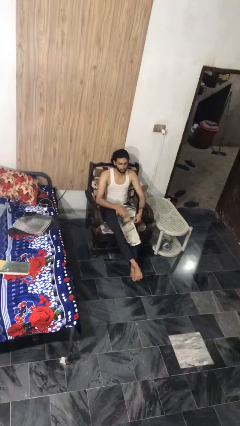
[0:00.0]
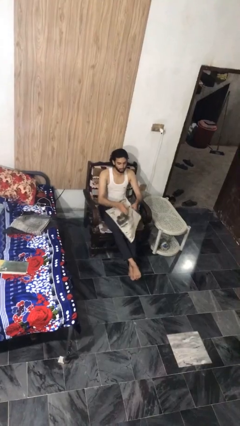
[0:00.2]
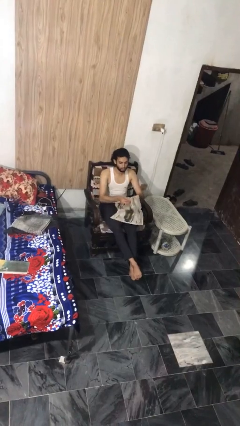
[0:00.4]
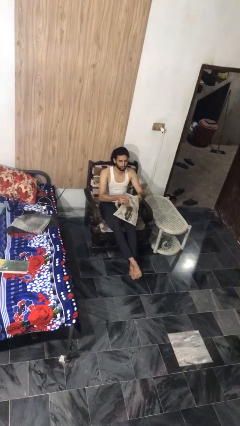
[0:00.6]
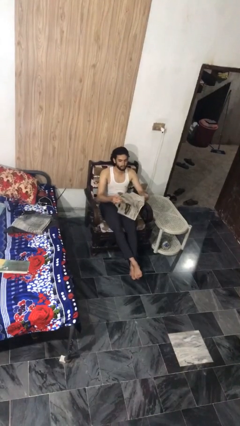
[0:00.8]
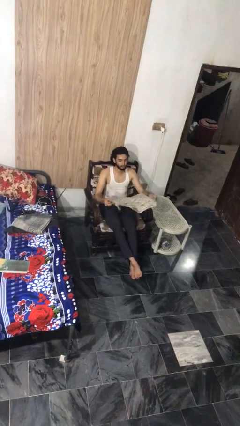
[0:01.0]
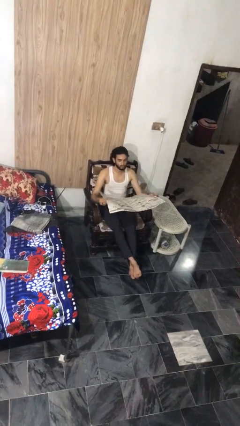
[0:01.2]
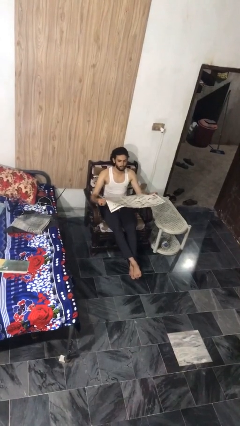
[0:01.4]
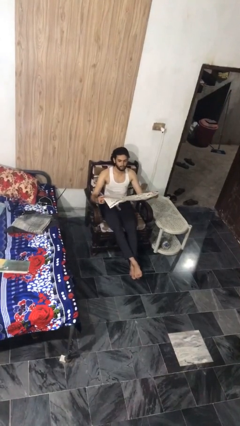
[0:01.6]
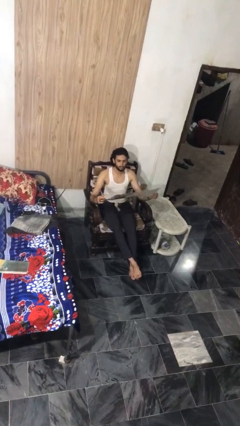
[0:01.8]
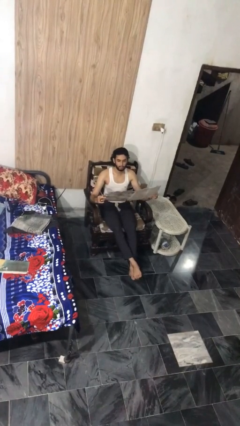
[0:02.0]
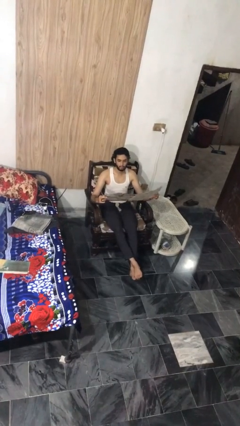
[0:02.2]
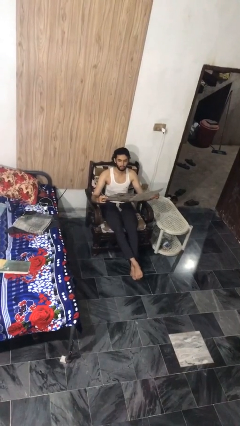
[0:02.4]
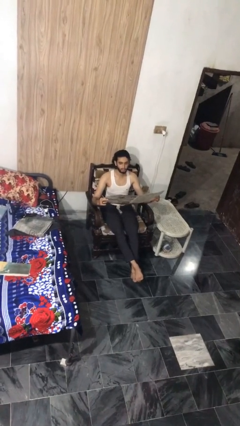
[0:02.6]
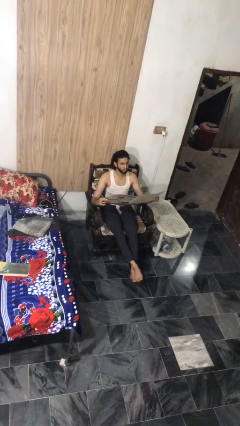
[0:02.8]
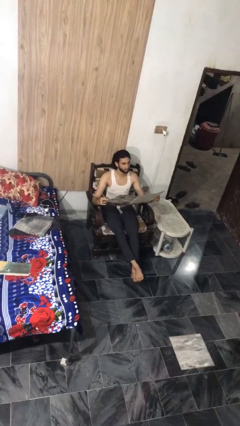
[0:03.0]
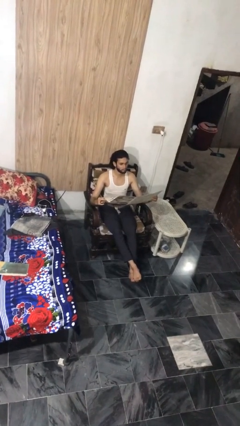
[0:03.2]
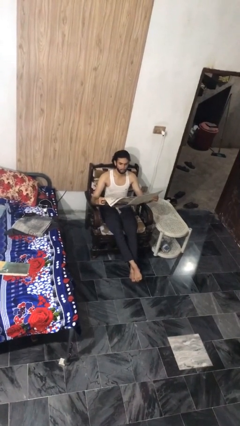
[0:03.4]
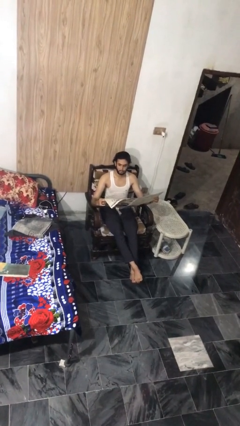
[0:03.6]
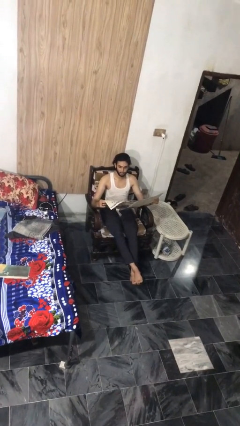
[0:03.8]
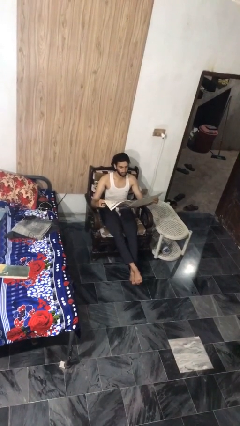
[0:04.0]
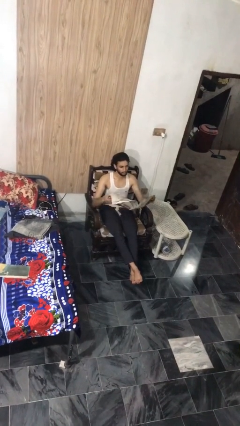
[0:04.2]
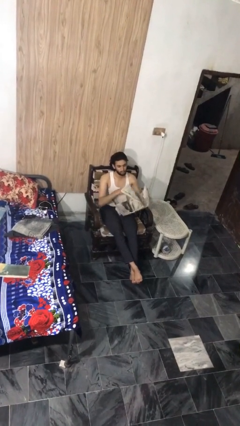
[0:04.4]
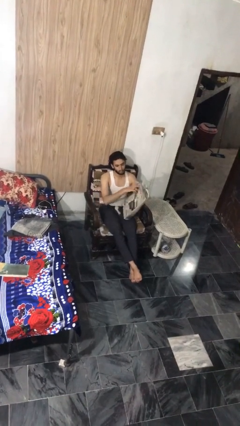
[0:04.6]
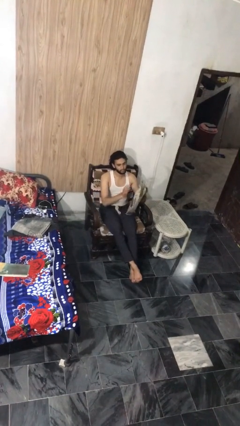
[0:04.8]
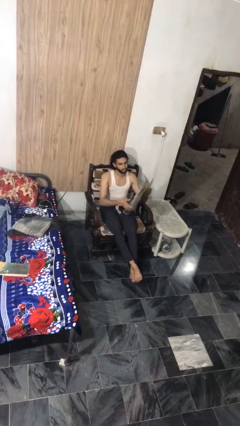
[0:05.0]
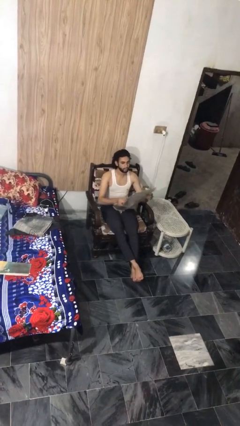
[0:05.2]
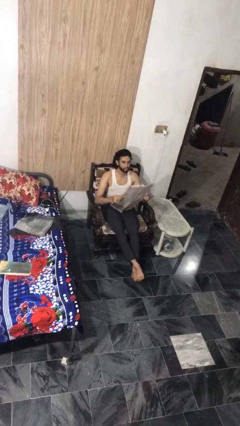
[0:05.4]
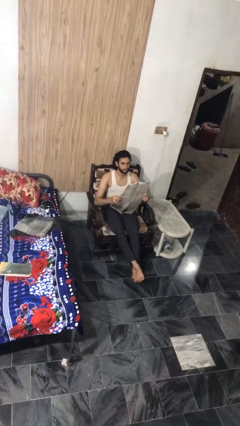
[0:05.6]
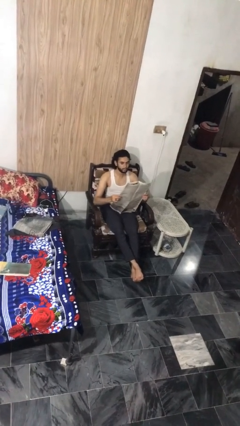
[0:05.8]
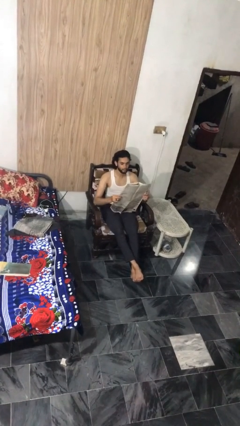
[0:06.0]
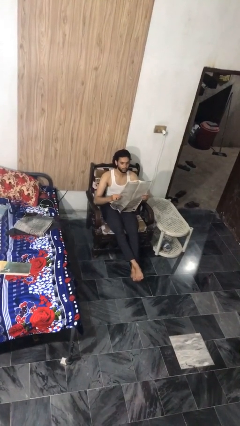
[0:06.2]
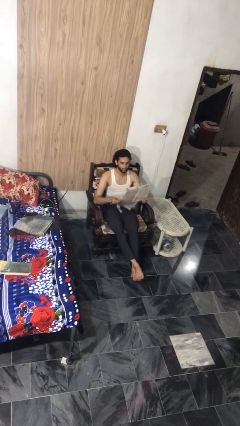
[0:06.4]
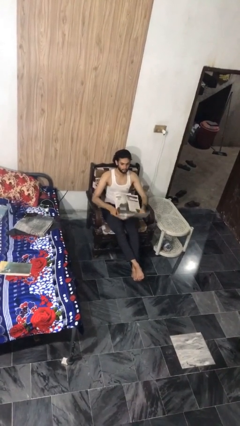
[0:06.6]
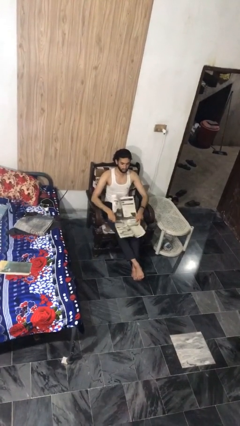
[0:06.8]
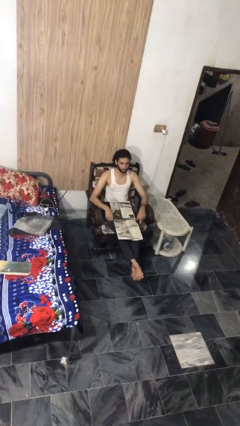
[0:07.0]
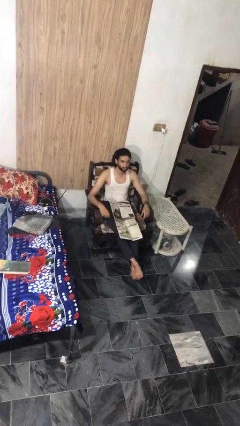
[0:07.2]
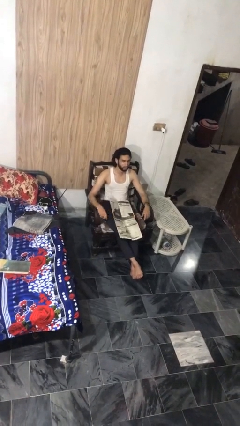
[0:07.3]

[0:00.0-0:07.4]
person reads newspaper

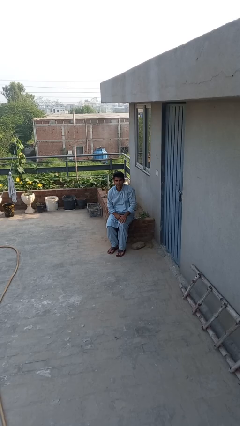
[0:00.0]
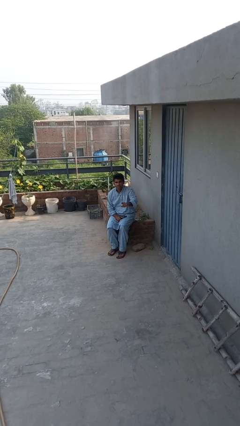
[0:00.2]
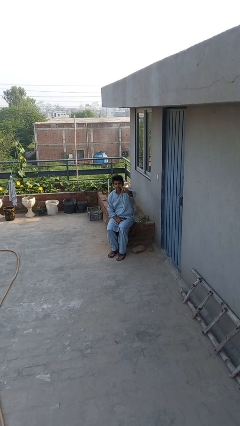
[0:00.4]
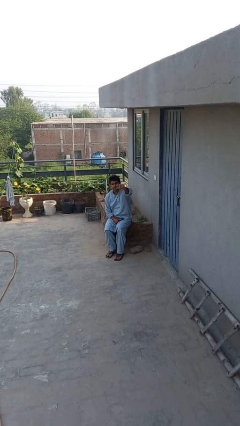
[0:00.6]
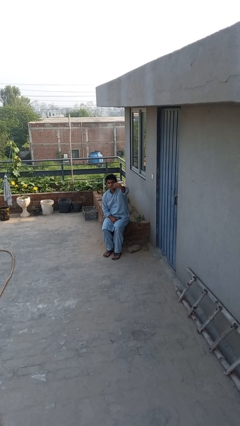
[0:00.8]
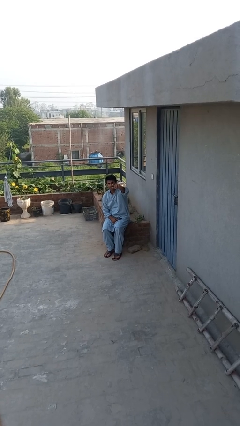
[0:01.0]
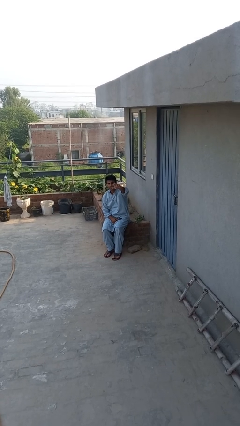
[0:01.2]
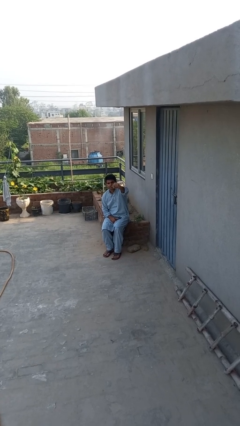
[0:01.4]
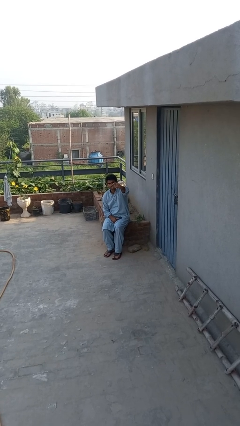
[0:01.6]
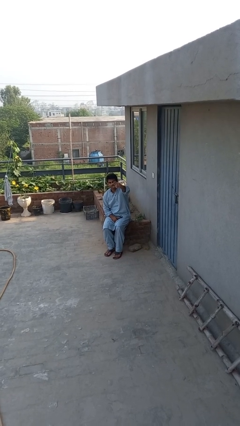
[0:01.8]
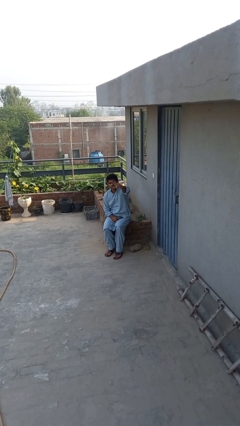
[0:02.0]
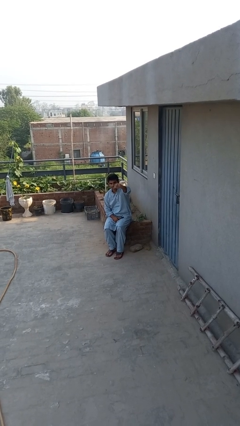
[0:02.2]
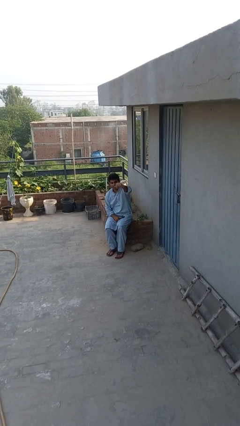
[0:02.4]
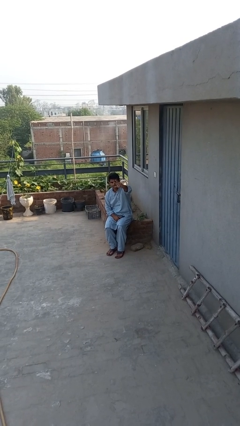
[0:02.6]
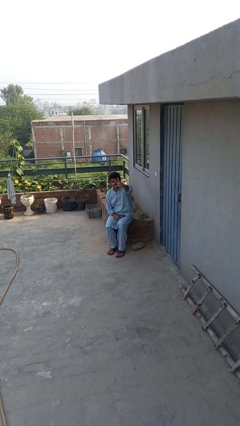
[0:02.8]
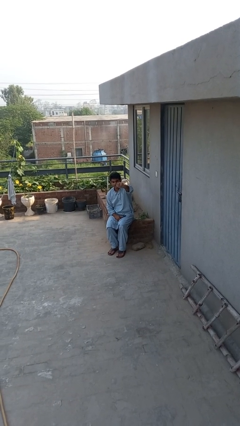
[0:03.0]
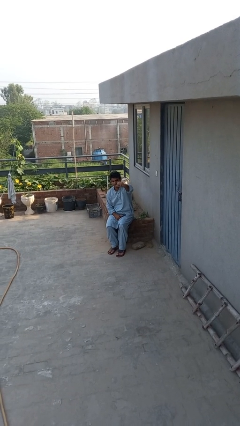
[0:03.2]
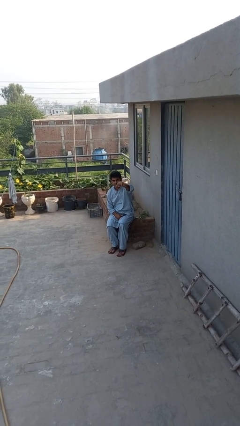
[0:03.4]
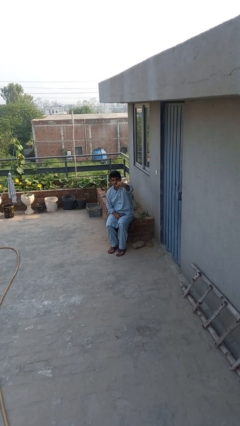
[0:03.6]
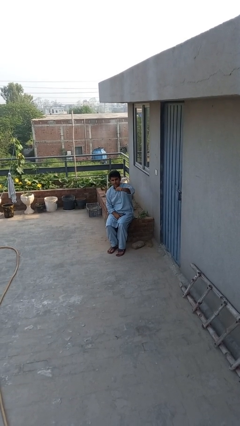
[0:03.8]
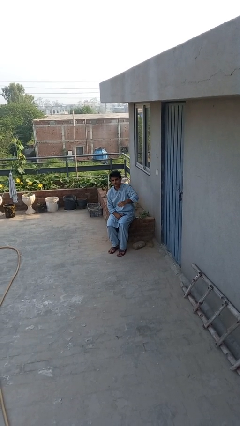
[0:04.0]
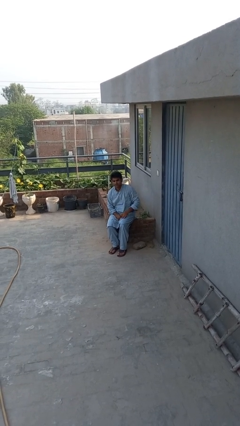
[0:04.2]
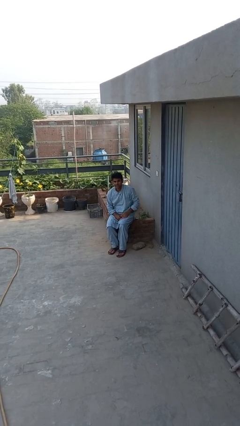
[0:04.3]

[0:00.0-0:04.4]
person gestures come here

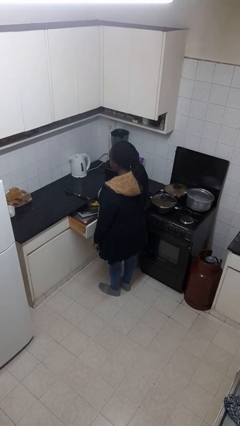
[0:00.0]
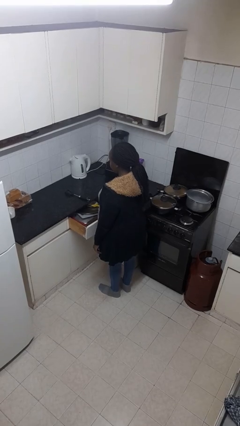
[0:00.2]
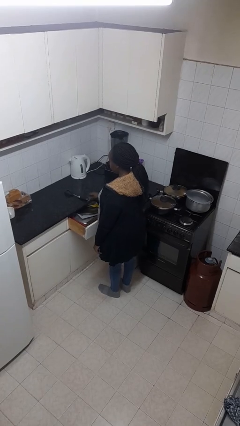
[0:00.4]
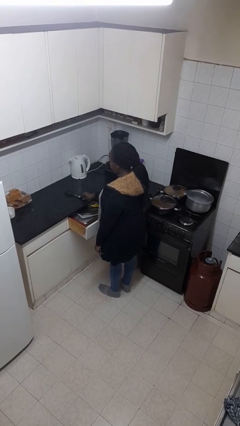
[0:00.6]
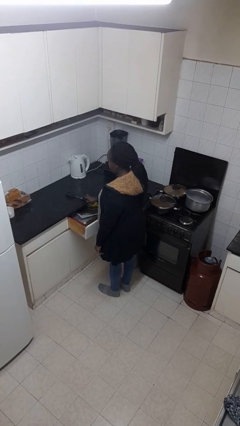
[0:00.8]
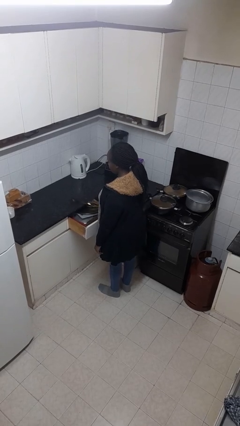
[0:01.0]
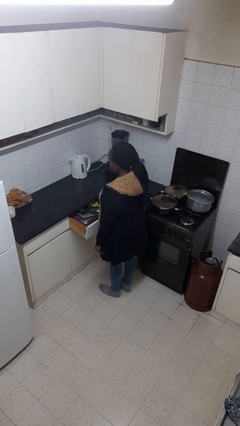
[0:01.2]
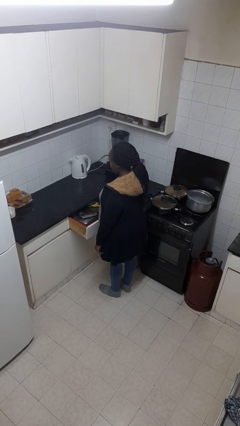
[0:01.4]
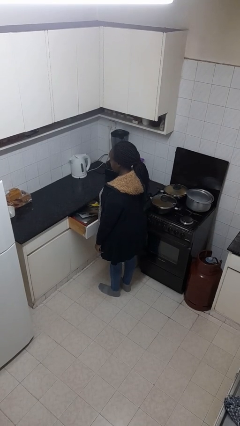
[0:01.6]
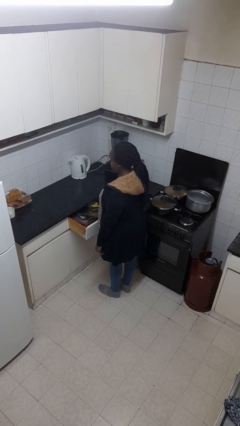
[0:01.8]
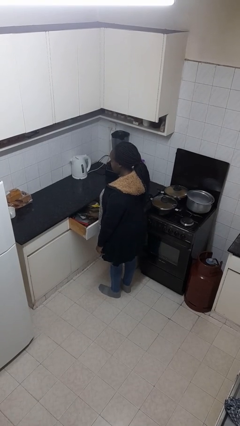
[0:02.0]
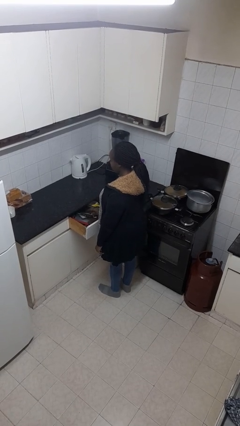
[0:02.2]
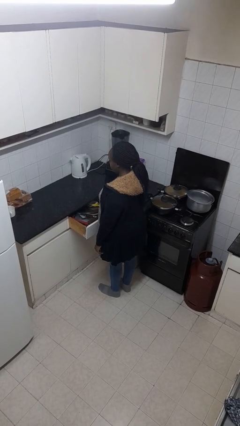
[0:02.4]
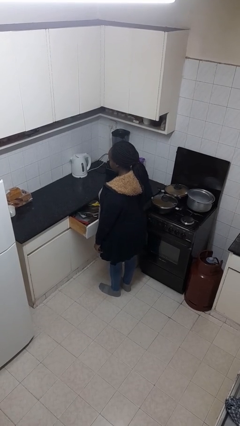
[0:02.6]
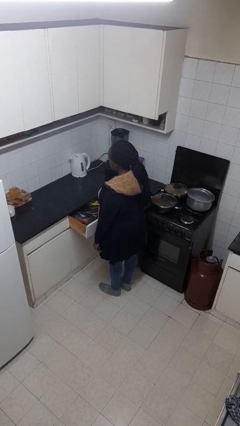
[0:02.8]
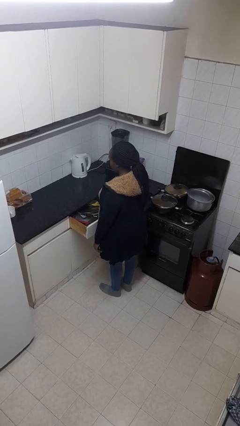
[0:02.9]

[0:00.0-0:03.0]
person puts object into kitchen drawer

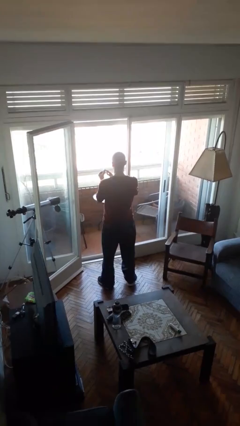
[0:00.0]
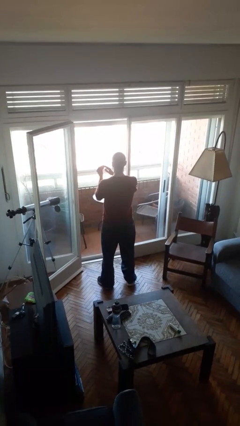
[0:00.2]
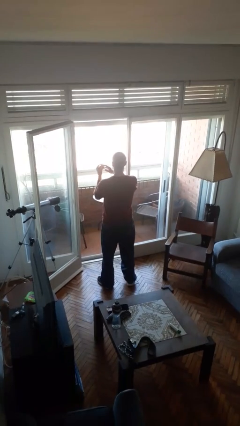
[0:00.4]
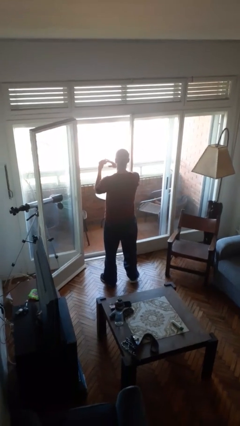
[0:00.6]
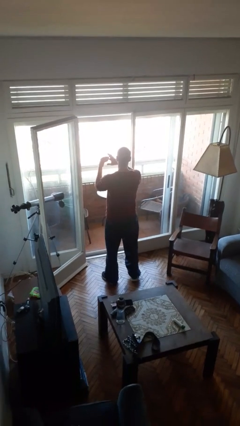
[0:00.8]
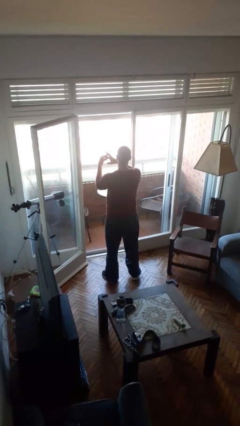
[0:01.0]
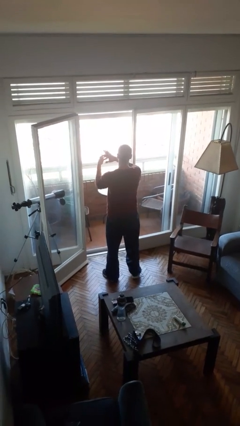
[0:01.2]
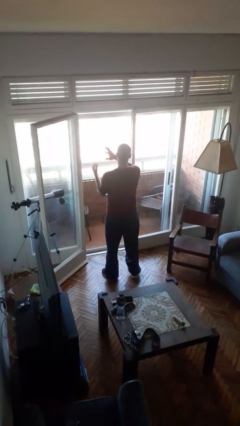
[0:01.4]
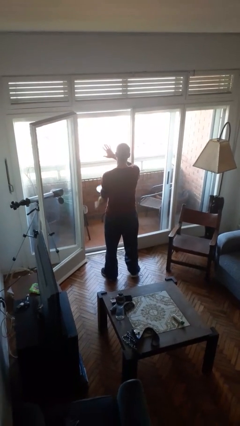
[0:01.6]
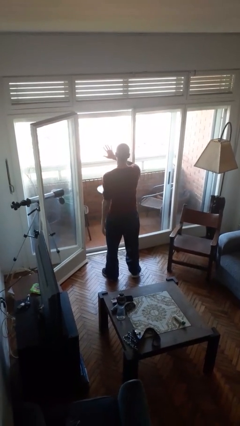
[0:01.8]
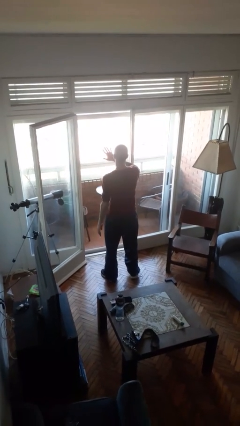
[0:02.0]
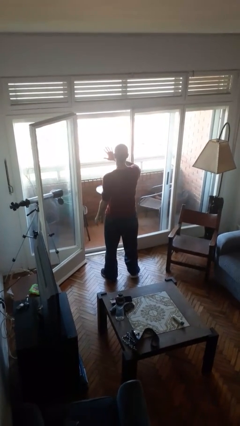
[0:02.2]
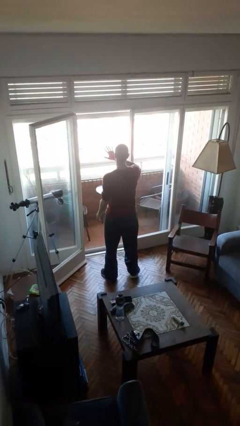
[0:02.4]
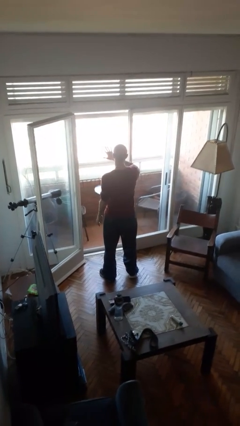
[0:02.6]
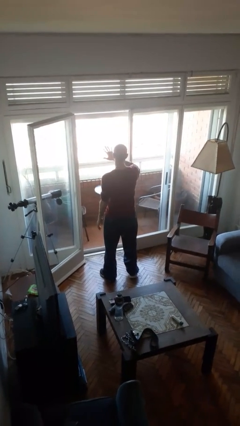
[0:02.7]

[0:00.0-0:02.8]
person puts on ring

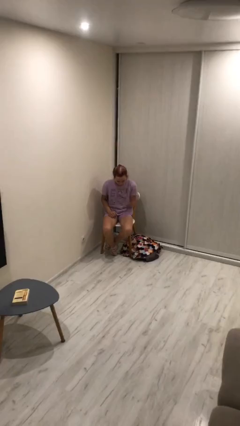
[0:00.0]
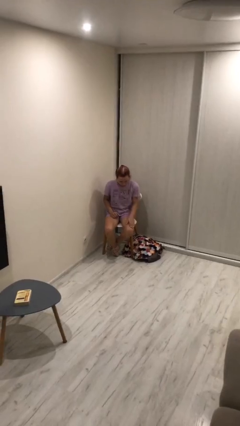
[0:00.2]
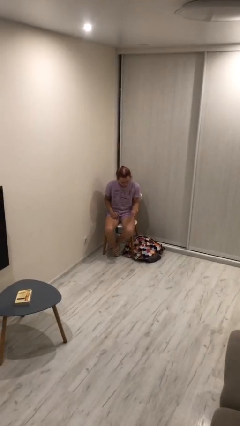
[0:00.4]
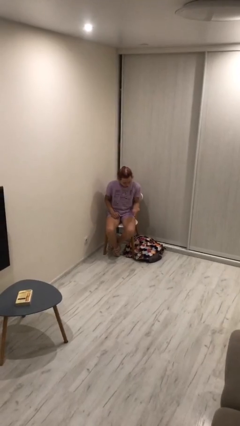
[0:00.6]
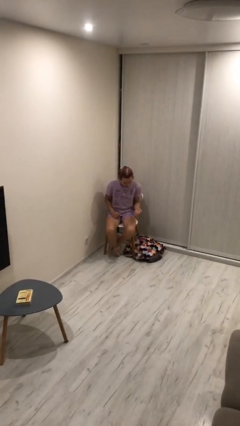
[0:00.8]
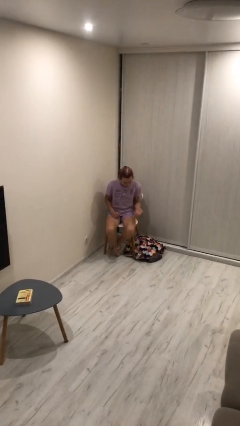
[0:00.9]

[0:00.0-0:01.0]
person swats bug
